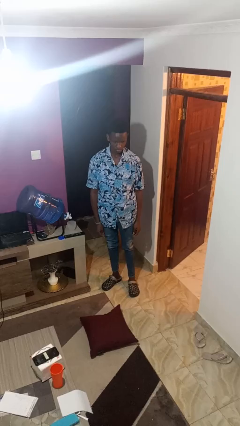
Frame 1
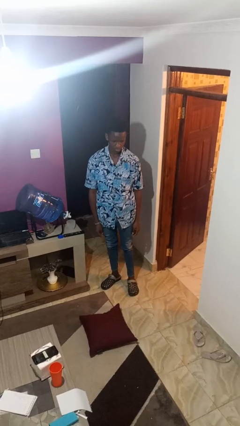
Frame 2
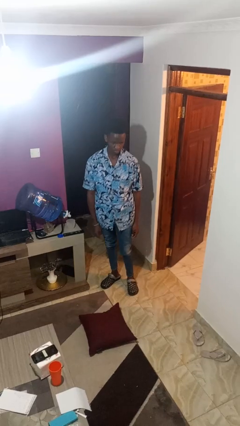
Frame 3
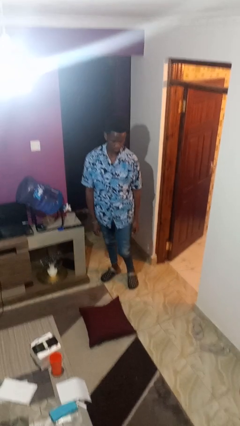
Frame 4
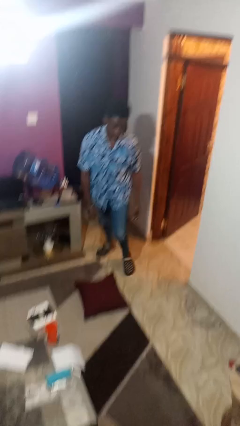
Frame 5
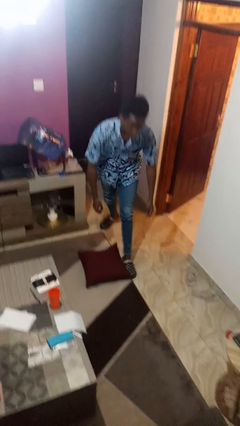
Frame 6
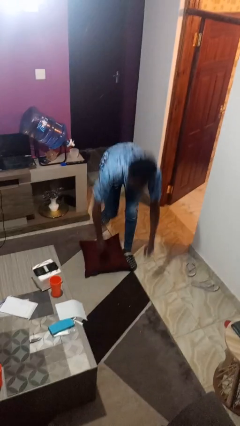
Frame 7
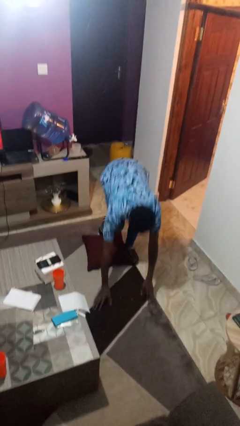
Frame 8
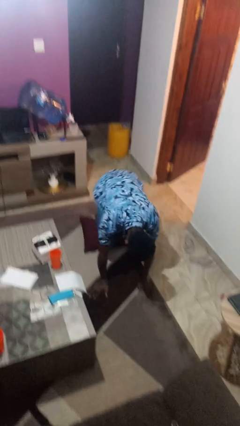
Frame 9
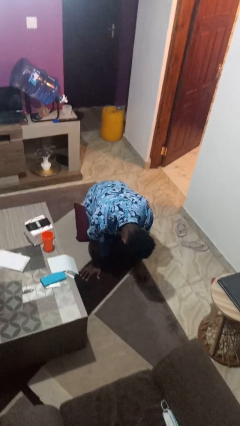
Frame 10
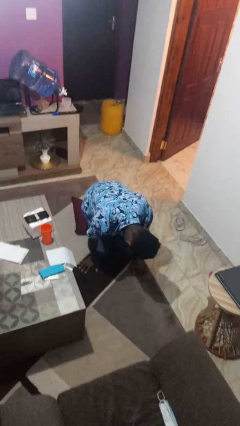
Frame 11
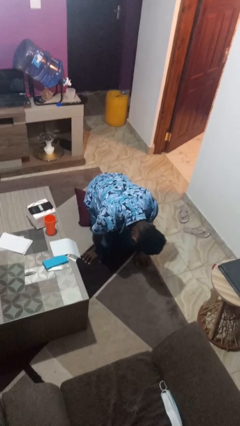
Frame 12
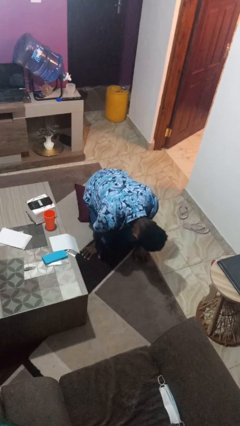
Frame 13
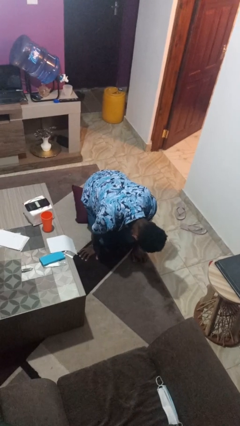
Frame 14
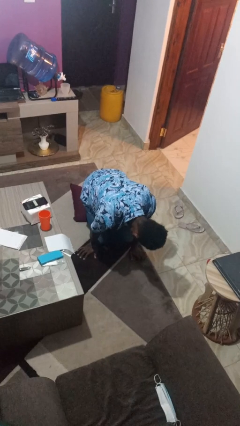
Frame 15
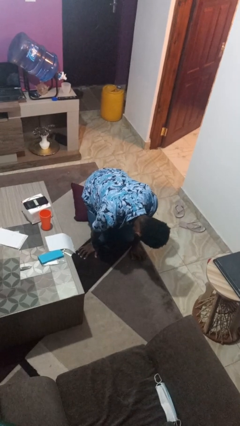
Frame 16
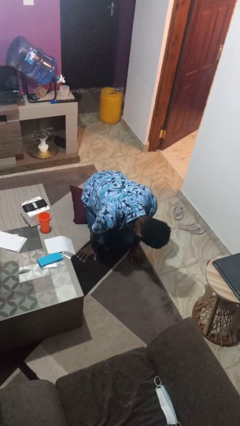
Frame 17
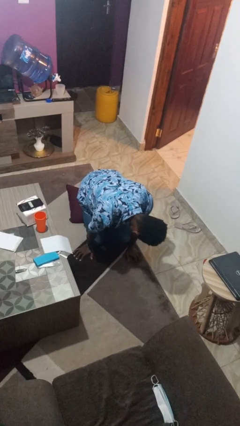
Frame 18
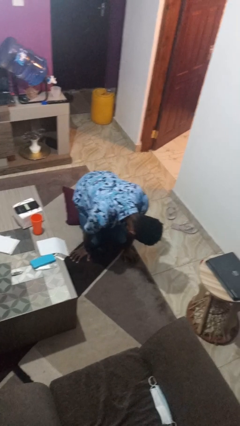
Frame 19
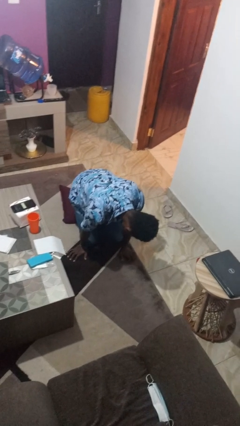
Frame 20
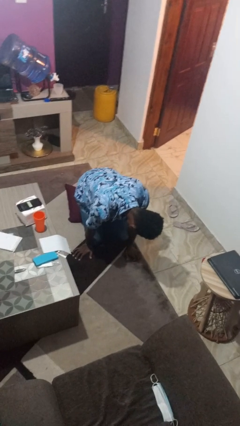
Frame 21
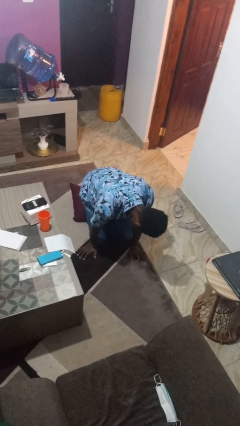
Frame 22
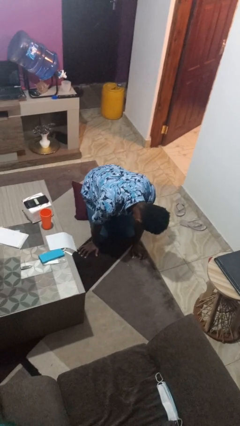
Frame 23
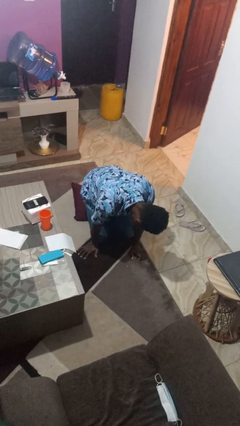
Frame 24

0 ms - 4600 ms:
person trips on object on floor

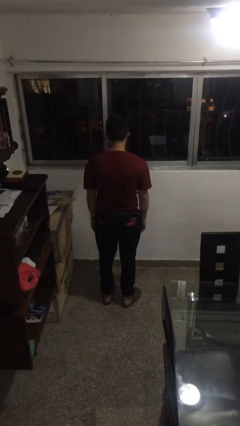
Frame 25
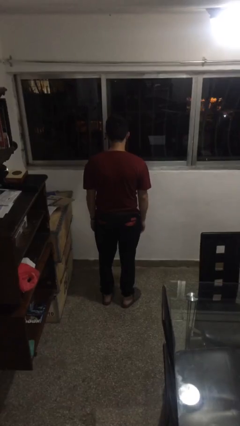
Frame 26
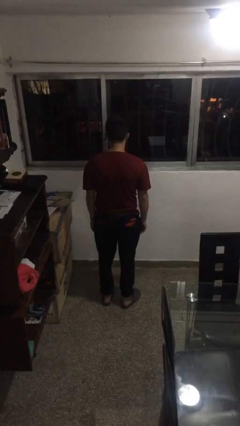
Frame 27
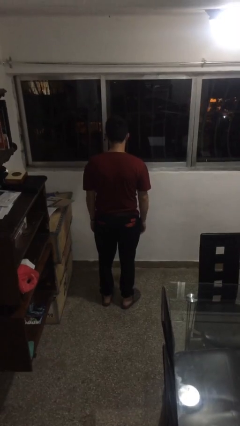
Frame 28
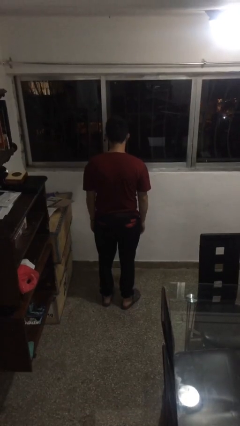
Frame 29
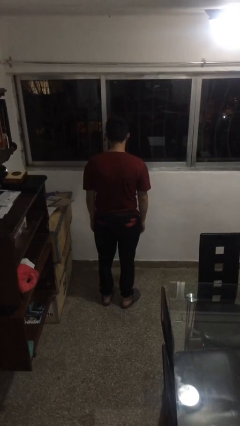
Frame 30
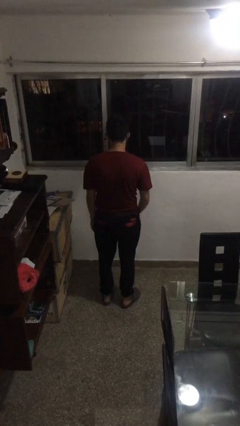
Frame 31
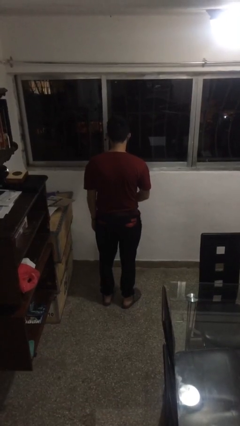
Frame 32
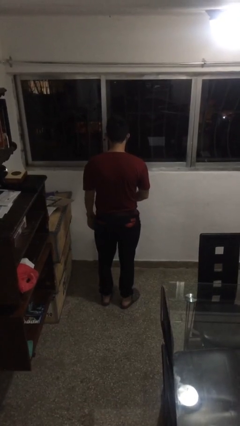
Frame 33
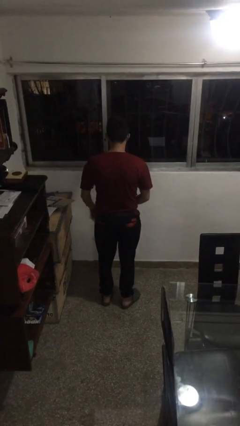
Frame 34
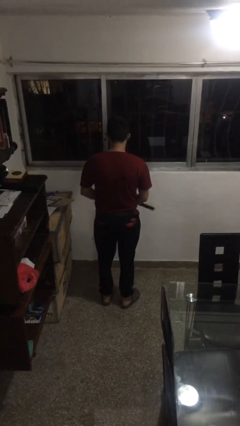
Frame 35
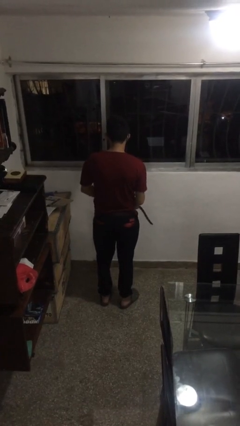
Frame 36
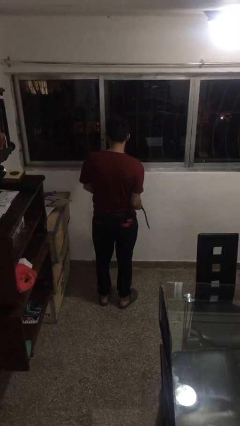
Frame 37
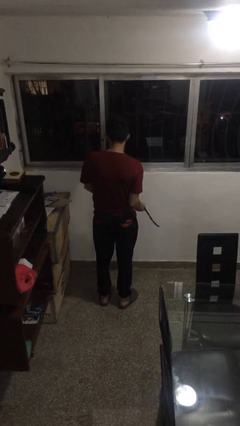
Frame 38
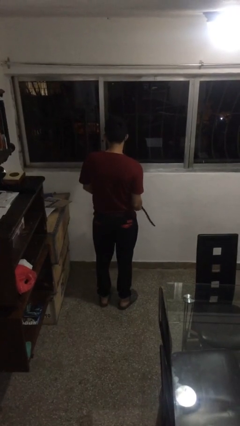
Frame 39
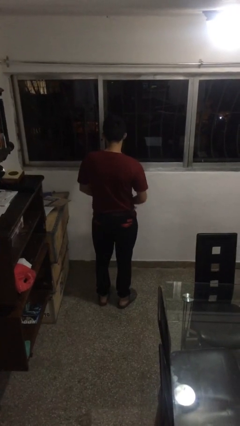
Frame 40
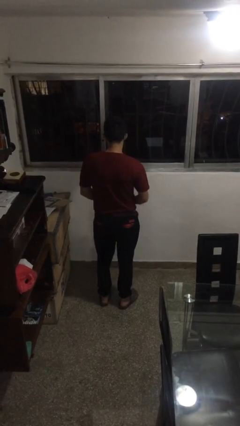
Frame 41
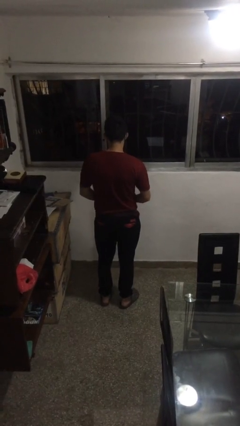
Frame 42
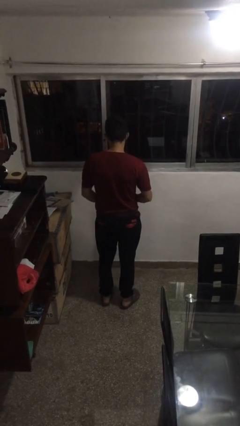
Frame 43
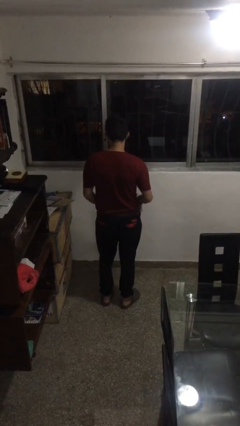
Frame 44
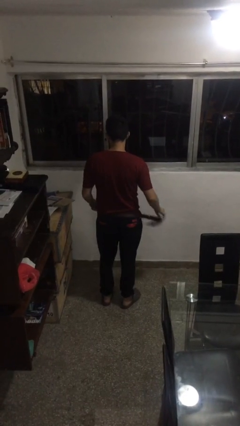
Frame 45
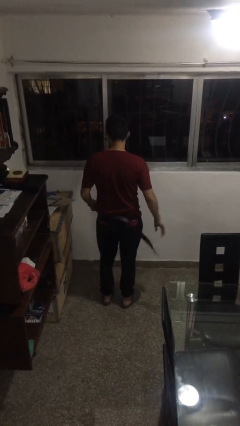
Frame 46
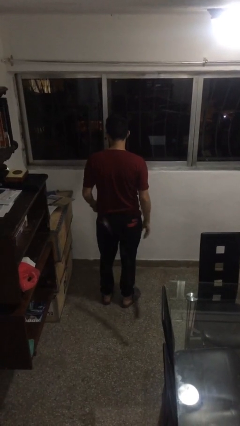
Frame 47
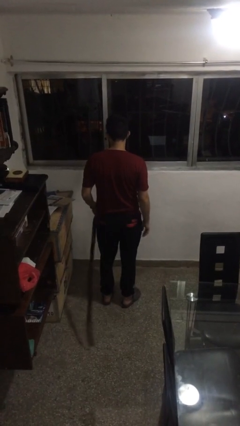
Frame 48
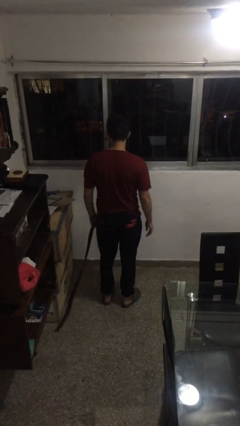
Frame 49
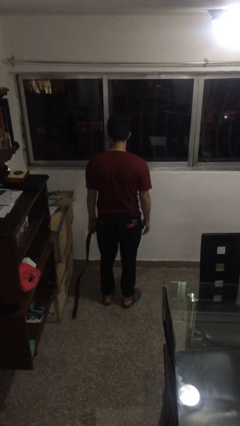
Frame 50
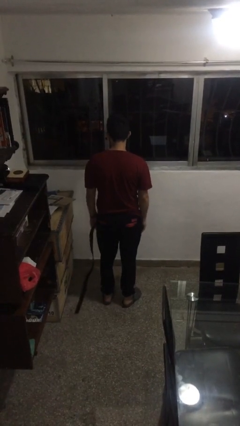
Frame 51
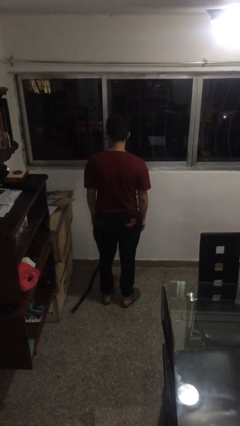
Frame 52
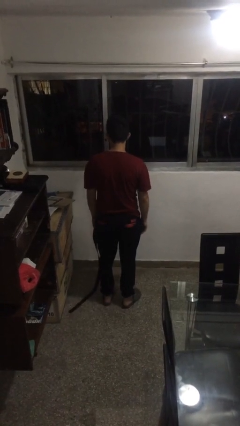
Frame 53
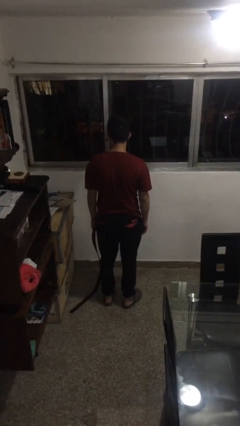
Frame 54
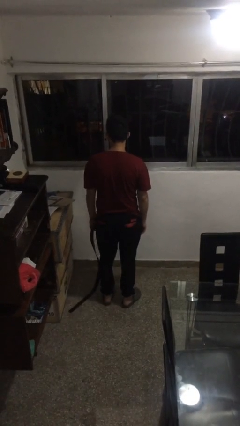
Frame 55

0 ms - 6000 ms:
person takes off belt

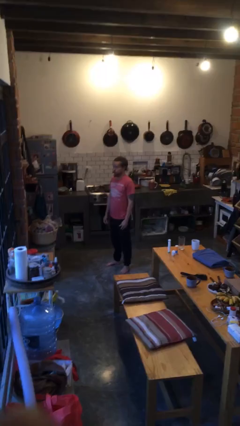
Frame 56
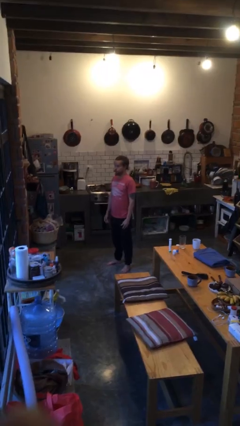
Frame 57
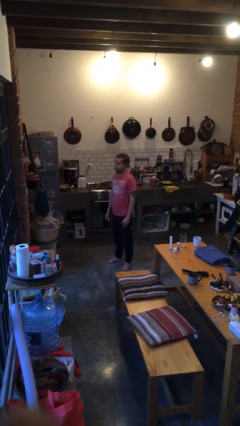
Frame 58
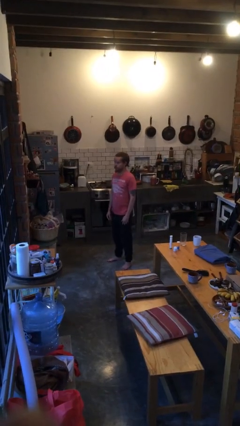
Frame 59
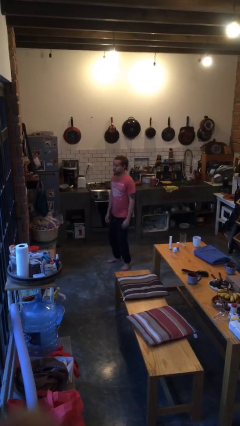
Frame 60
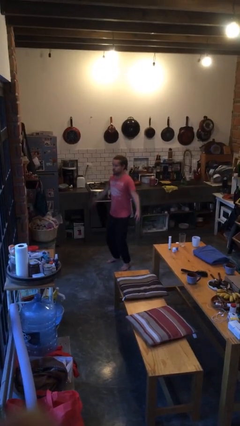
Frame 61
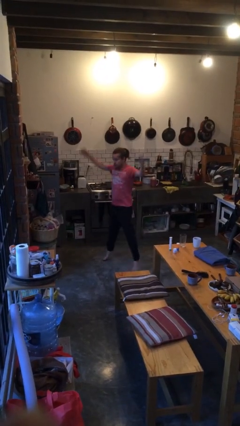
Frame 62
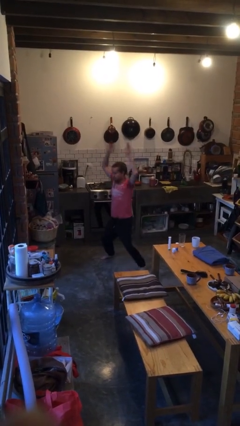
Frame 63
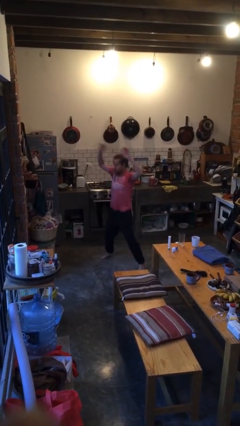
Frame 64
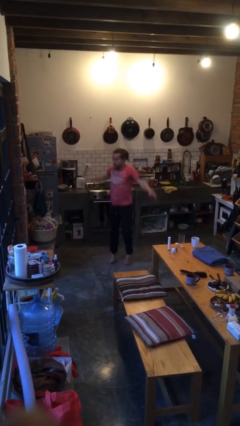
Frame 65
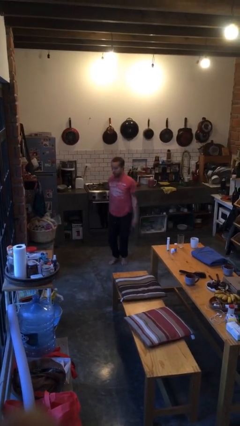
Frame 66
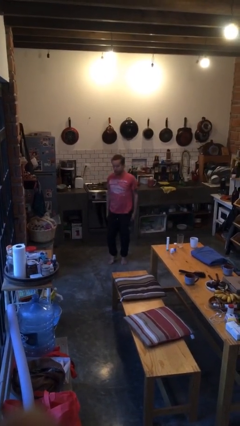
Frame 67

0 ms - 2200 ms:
person exercises with jumping jacks

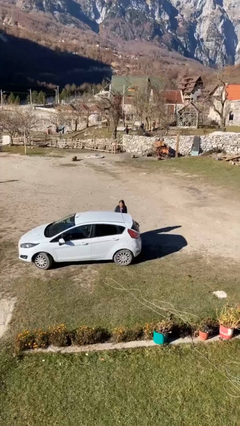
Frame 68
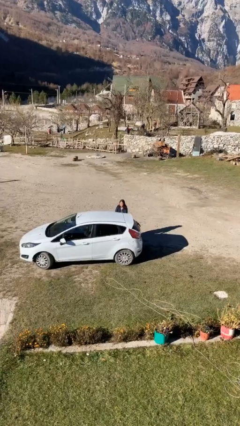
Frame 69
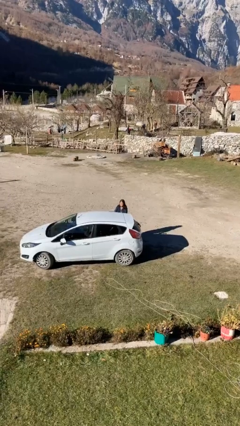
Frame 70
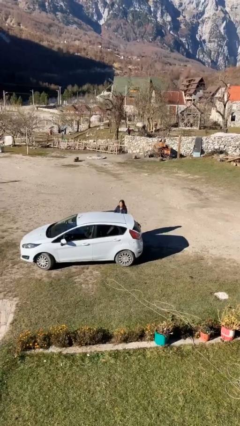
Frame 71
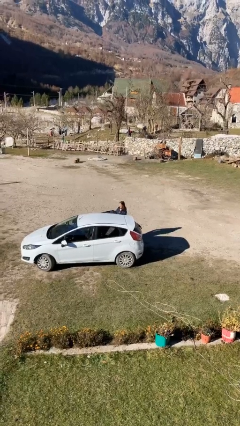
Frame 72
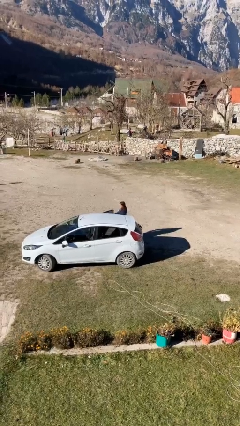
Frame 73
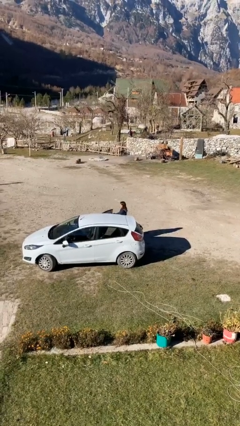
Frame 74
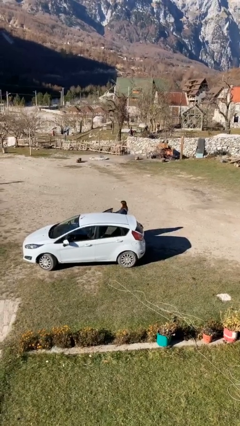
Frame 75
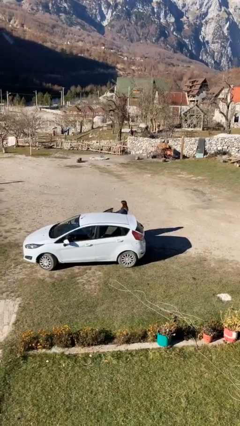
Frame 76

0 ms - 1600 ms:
person opens car door

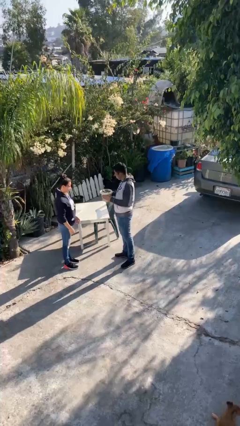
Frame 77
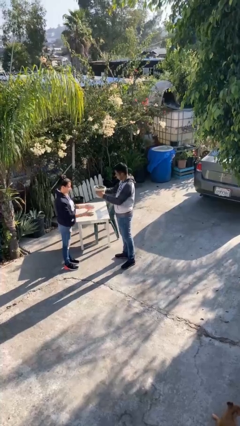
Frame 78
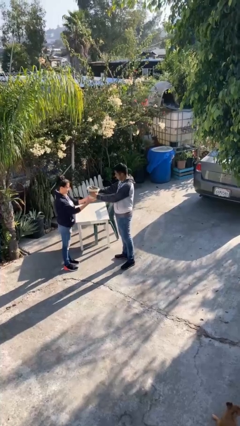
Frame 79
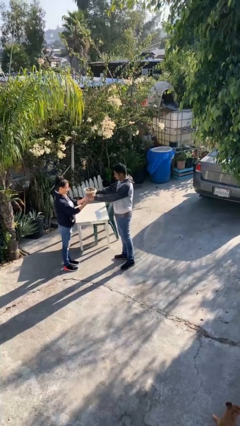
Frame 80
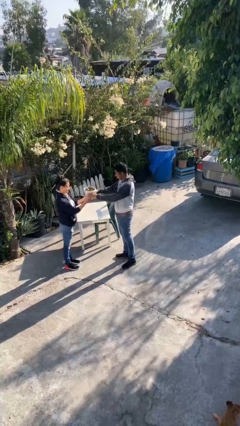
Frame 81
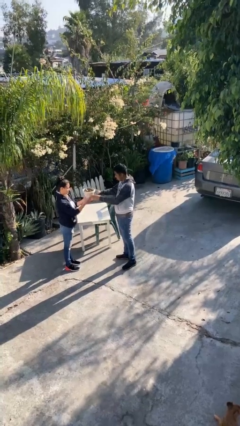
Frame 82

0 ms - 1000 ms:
person transfers object to person

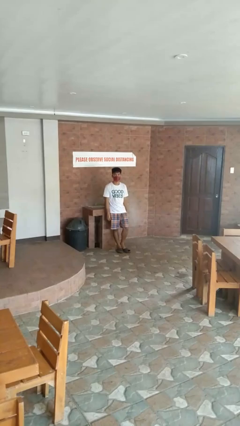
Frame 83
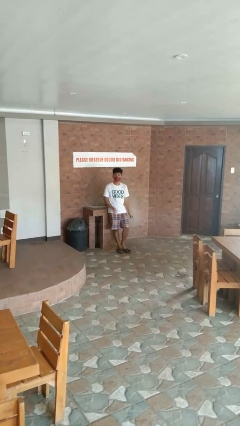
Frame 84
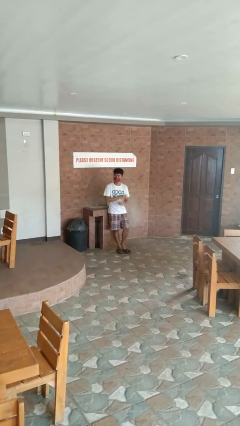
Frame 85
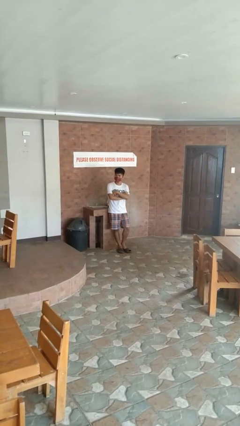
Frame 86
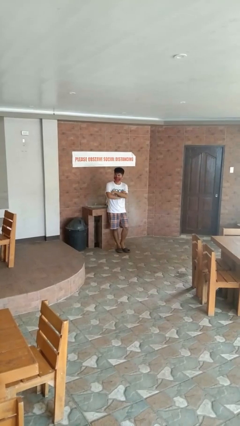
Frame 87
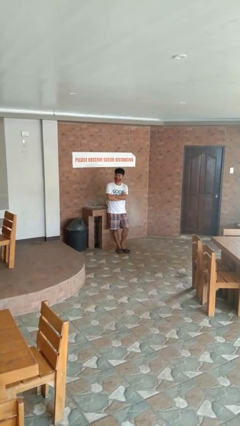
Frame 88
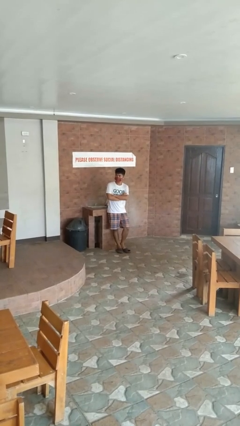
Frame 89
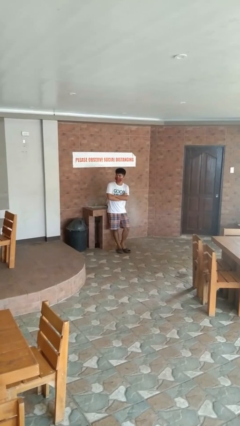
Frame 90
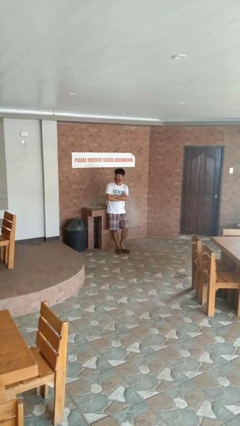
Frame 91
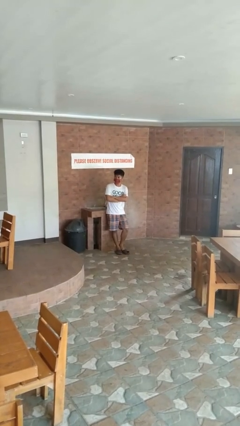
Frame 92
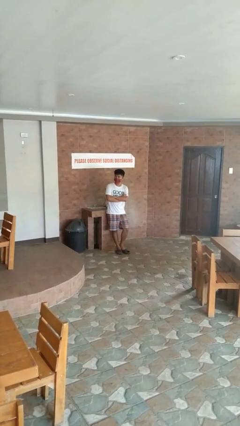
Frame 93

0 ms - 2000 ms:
person crosses arms
